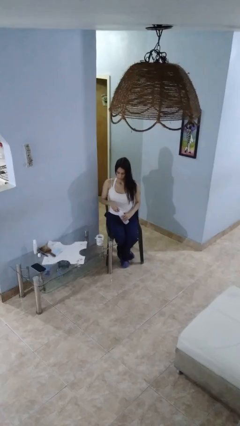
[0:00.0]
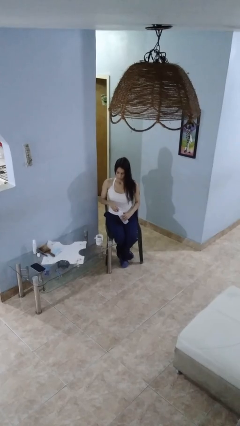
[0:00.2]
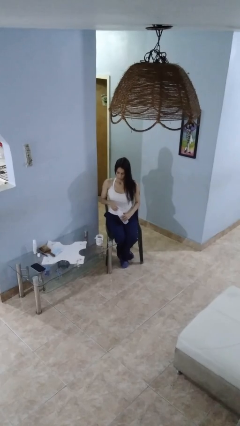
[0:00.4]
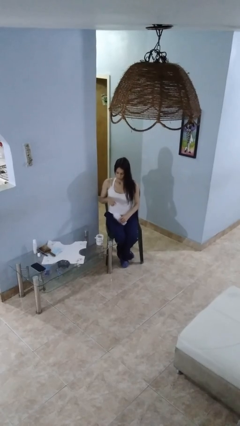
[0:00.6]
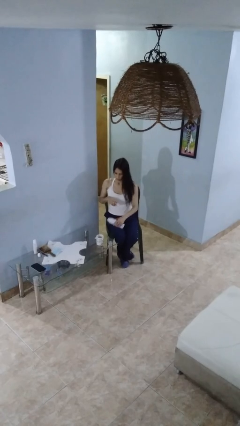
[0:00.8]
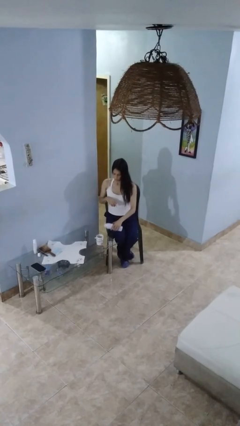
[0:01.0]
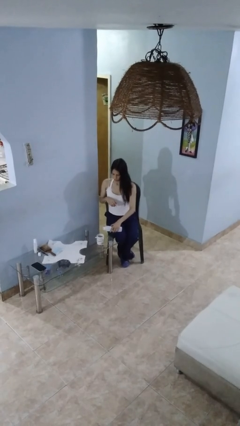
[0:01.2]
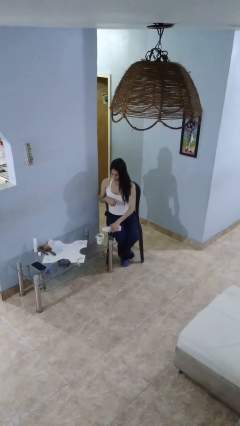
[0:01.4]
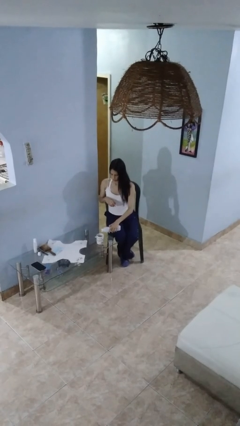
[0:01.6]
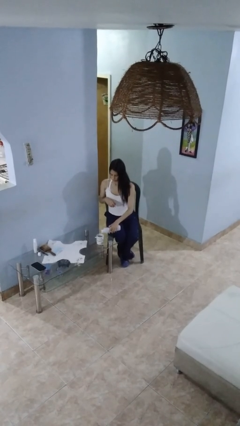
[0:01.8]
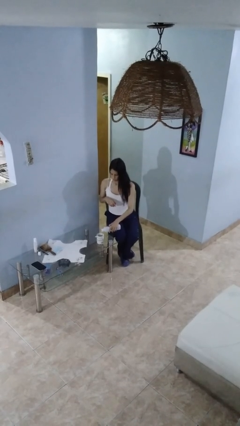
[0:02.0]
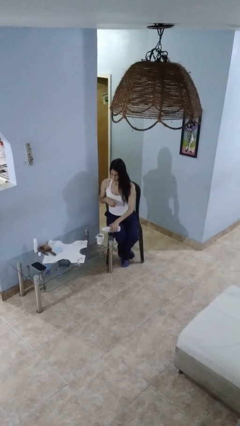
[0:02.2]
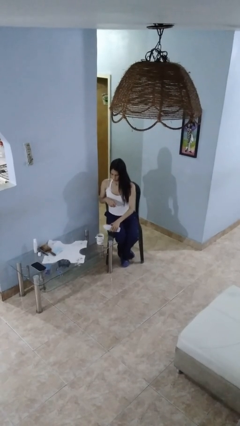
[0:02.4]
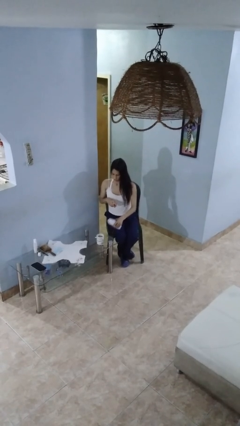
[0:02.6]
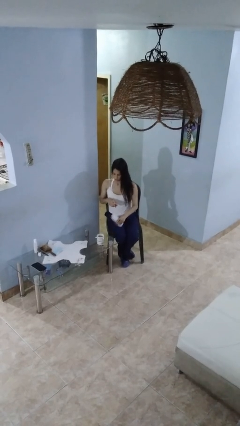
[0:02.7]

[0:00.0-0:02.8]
person pours liquid into cup

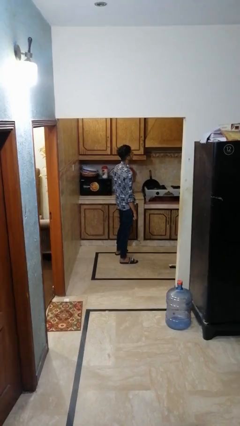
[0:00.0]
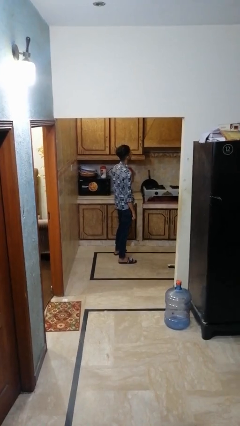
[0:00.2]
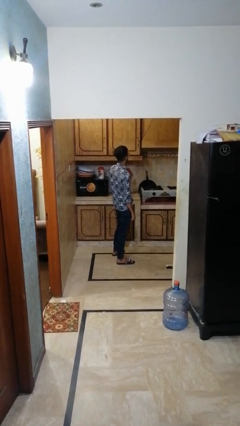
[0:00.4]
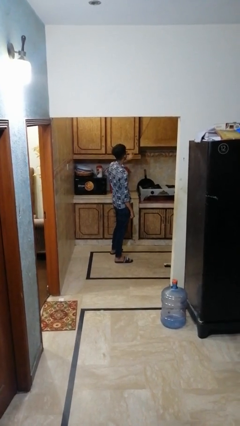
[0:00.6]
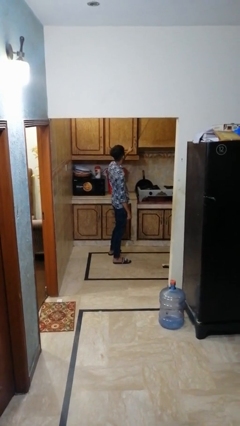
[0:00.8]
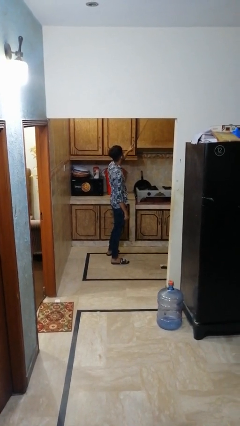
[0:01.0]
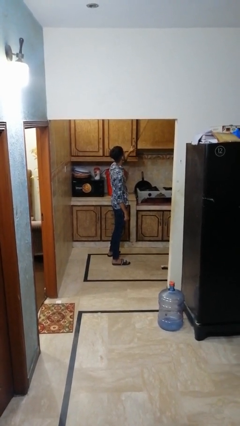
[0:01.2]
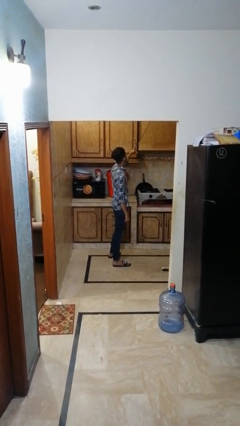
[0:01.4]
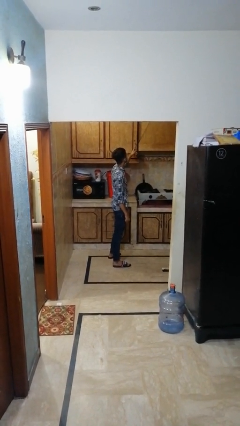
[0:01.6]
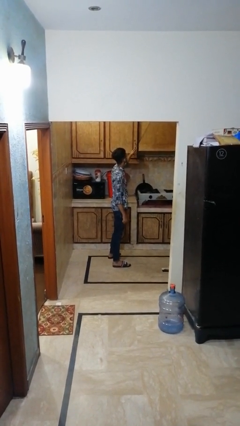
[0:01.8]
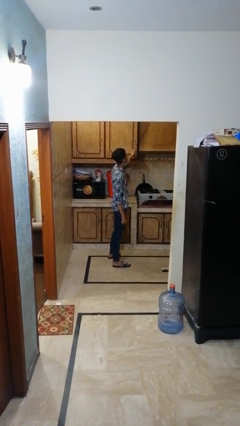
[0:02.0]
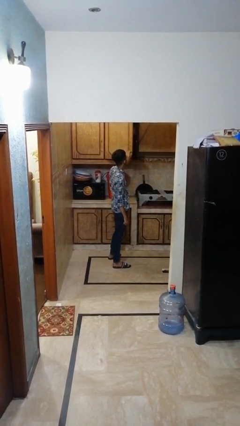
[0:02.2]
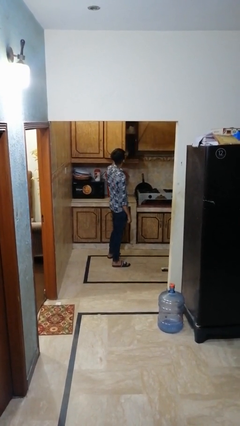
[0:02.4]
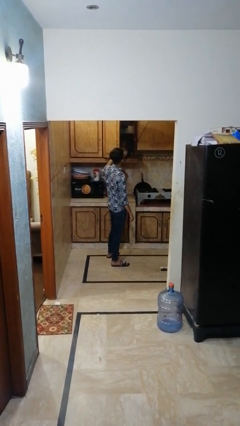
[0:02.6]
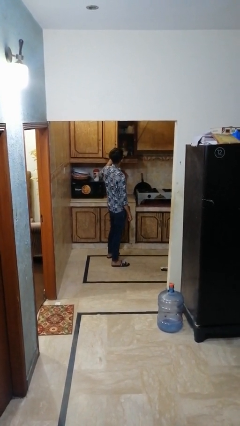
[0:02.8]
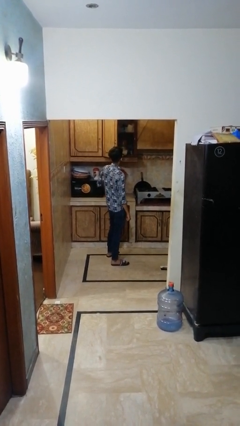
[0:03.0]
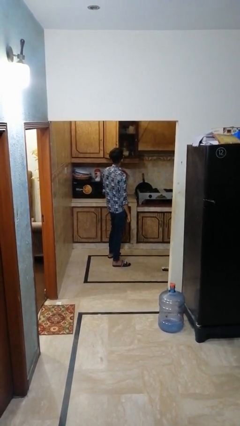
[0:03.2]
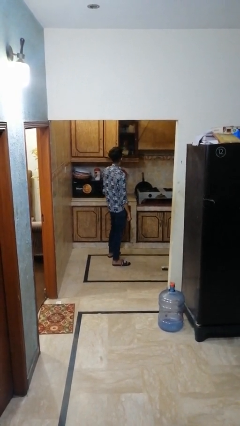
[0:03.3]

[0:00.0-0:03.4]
person opens cabinet

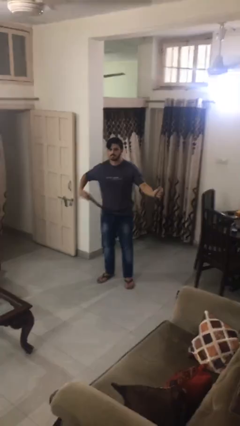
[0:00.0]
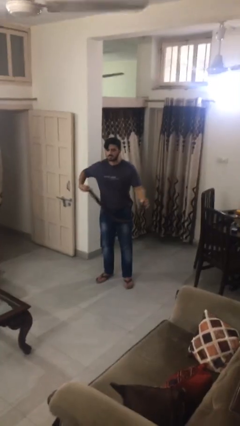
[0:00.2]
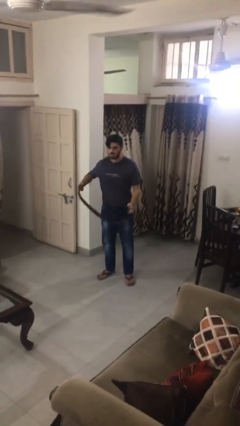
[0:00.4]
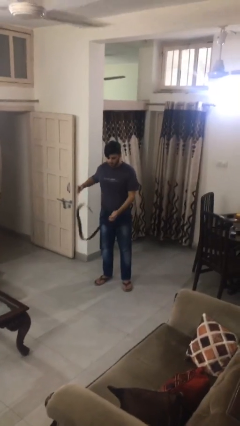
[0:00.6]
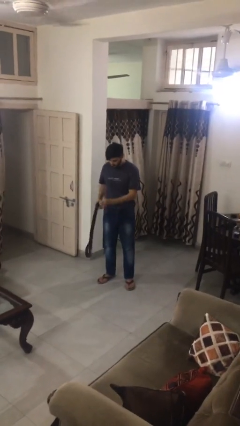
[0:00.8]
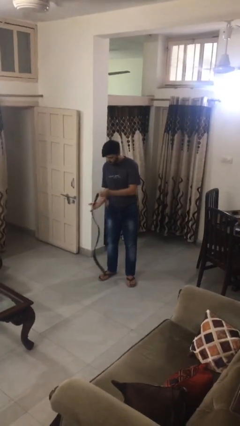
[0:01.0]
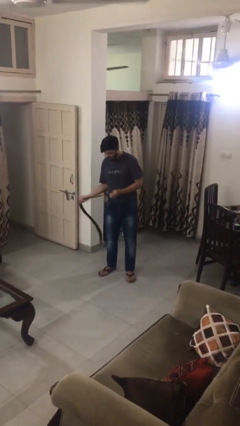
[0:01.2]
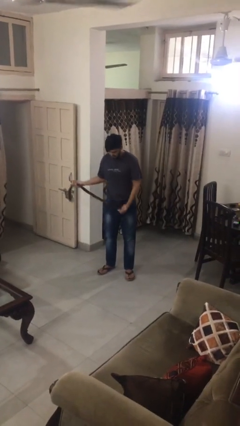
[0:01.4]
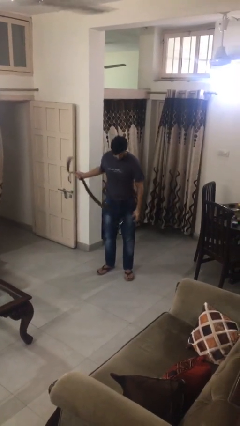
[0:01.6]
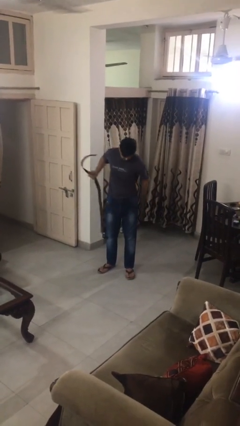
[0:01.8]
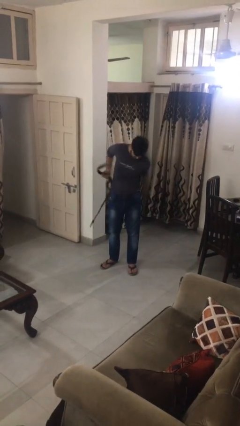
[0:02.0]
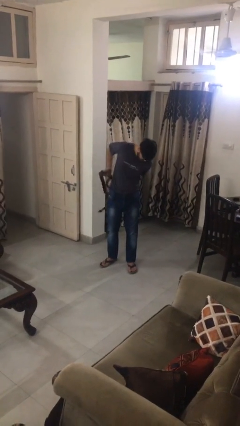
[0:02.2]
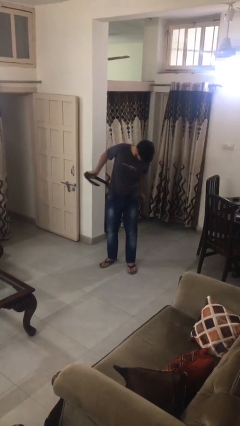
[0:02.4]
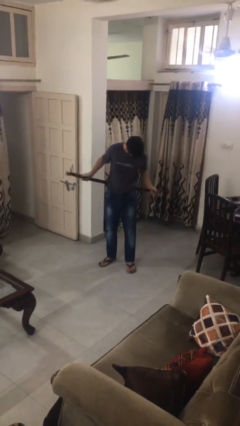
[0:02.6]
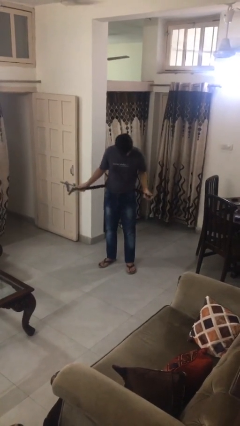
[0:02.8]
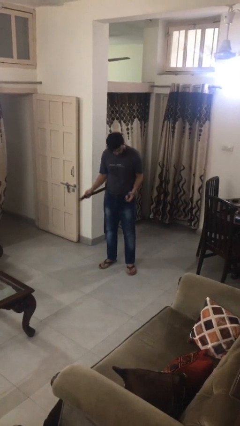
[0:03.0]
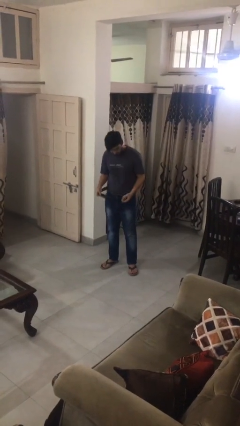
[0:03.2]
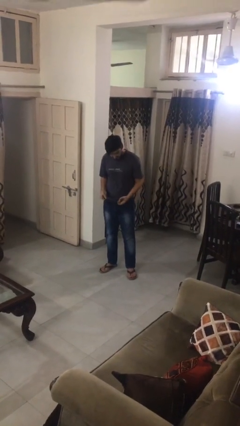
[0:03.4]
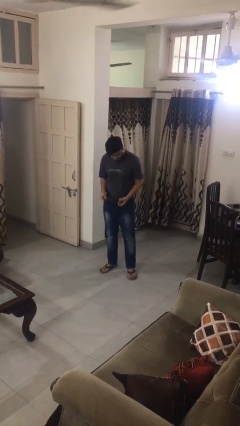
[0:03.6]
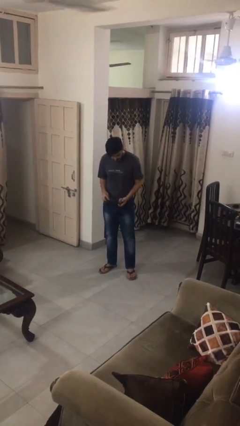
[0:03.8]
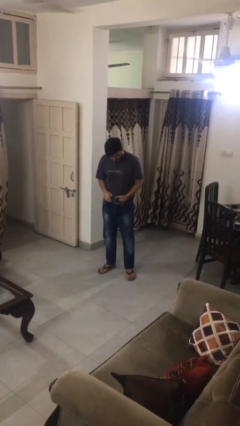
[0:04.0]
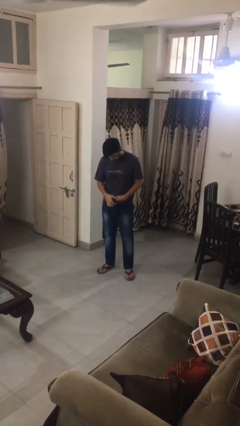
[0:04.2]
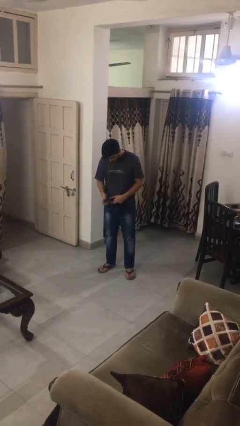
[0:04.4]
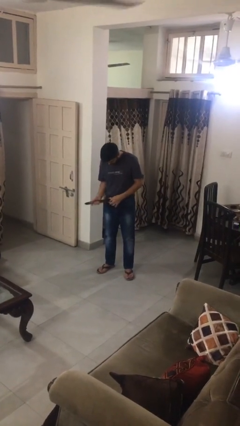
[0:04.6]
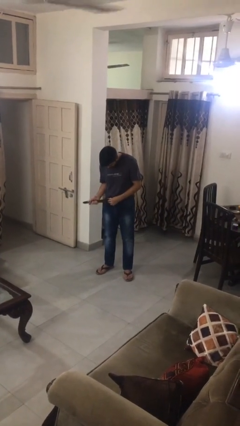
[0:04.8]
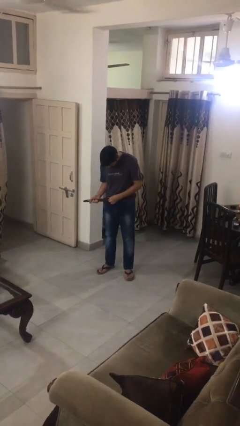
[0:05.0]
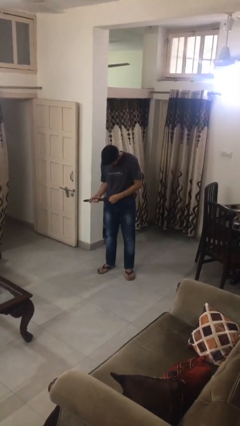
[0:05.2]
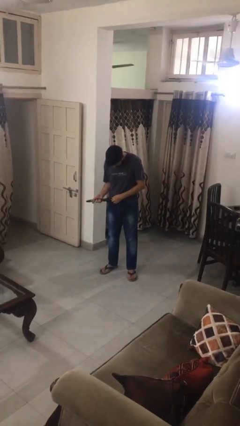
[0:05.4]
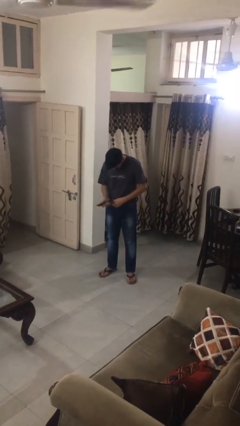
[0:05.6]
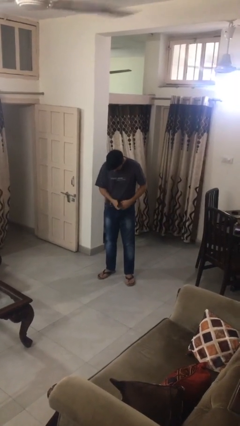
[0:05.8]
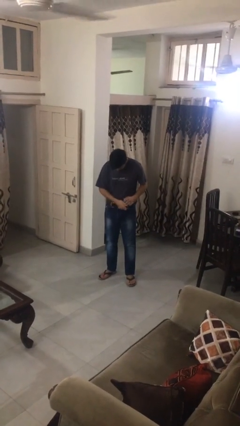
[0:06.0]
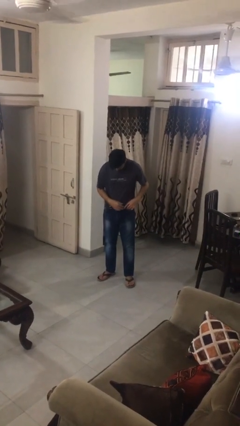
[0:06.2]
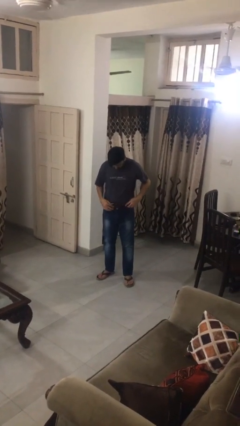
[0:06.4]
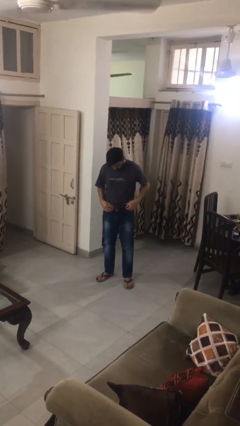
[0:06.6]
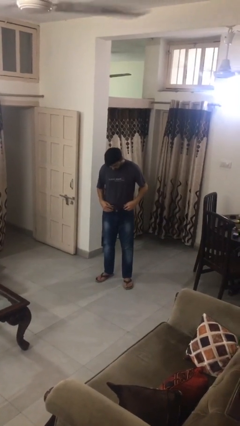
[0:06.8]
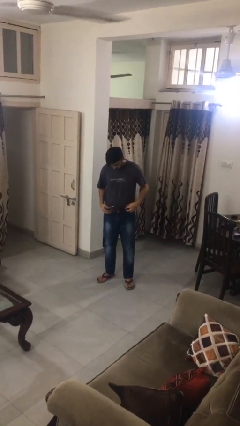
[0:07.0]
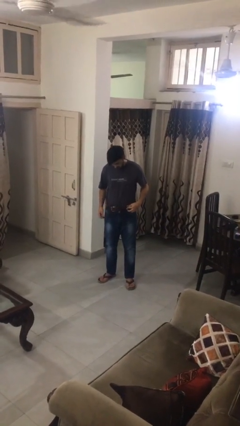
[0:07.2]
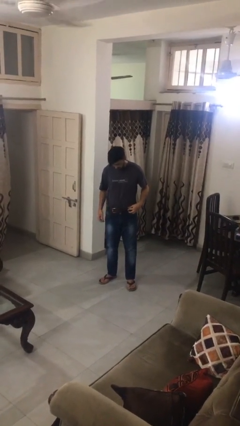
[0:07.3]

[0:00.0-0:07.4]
person puts on belt

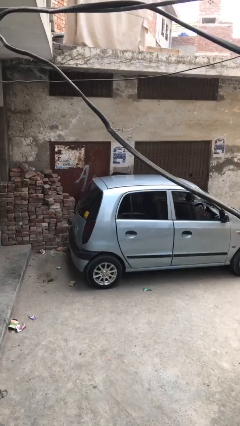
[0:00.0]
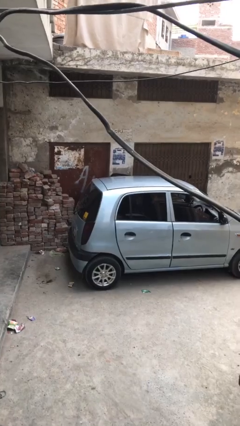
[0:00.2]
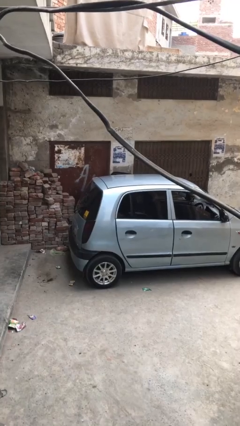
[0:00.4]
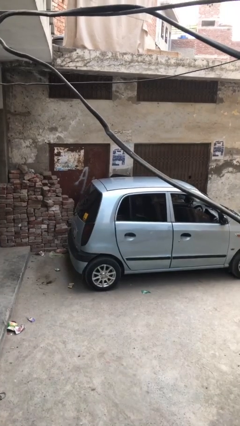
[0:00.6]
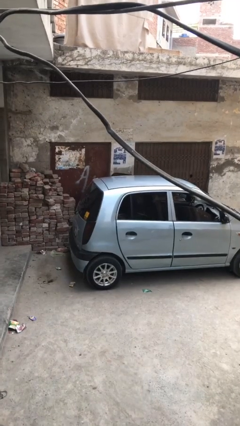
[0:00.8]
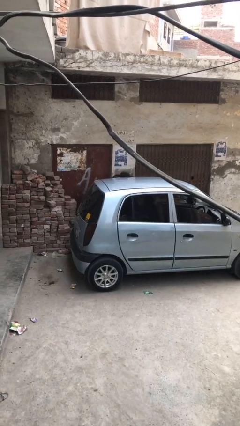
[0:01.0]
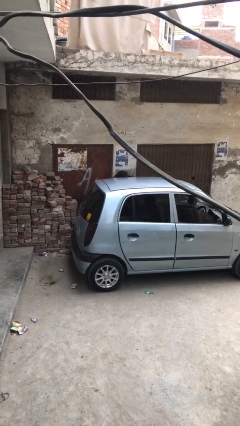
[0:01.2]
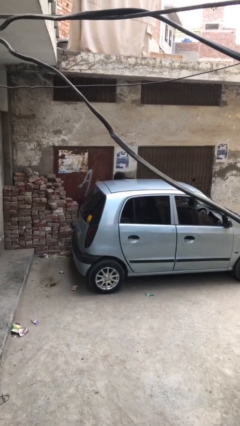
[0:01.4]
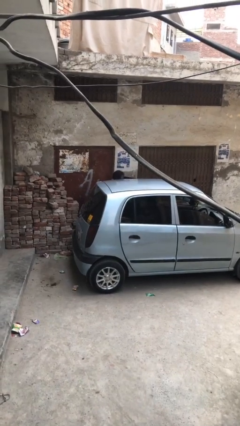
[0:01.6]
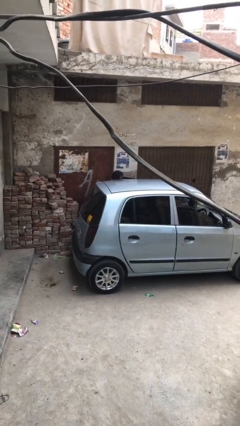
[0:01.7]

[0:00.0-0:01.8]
person exits car

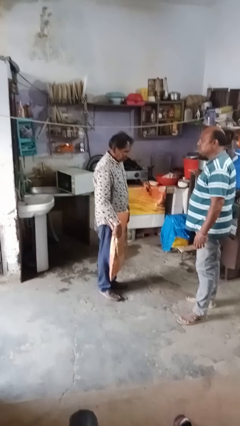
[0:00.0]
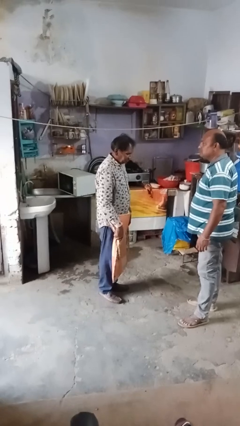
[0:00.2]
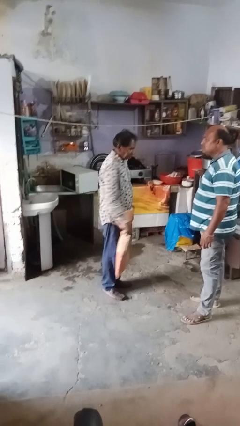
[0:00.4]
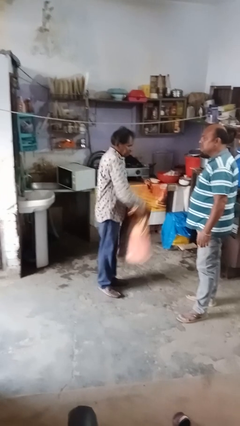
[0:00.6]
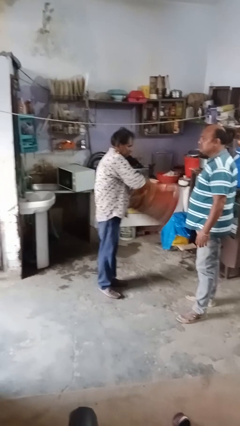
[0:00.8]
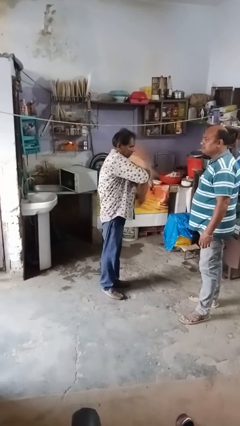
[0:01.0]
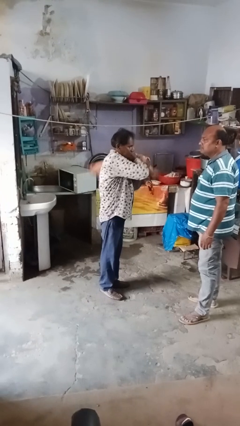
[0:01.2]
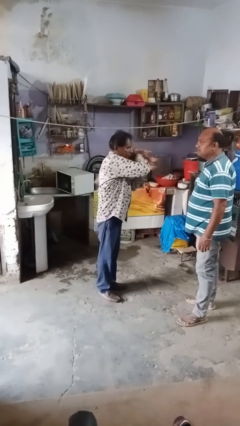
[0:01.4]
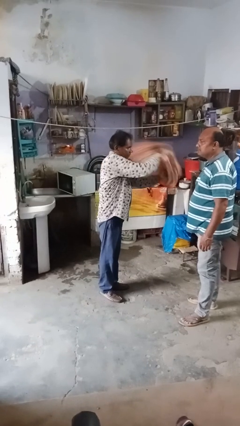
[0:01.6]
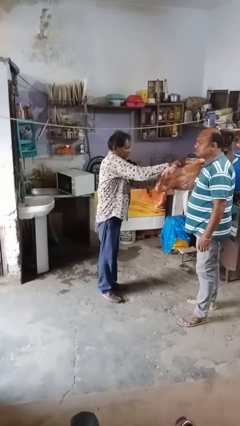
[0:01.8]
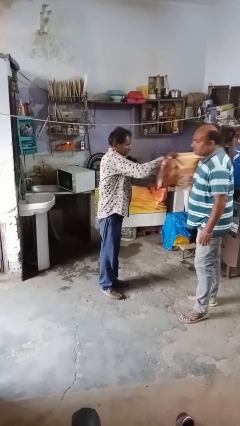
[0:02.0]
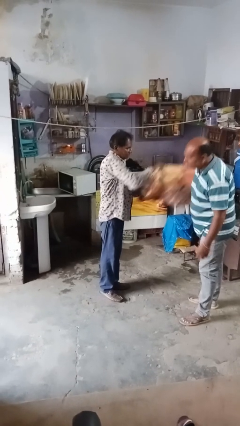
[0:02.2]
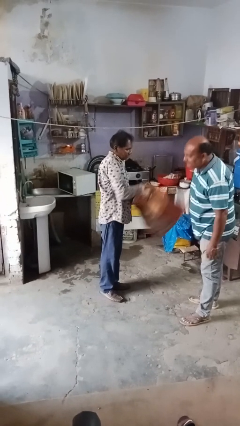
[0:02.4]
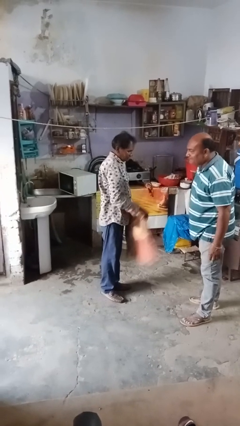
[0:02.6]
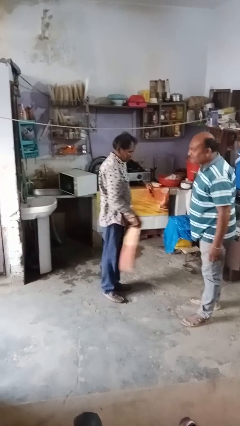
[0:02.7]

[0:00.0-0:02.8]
person hits person with pillow
